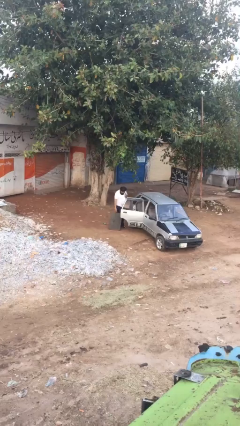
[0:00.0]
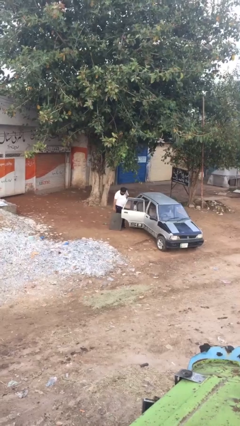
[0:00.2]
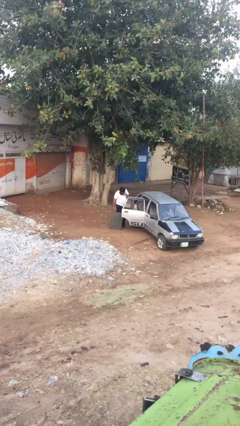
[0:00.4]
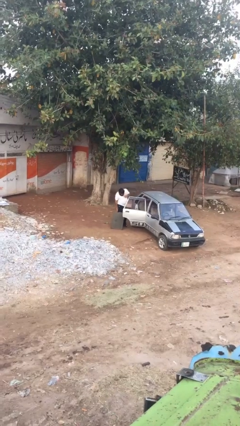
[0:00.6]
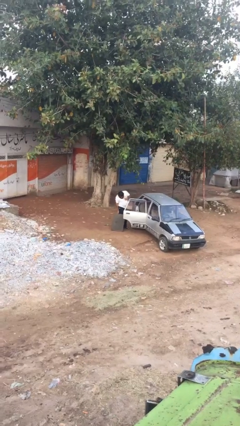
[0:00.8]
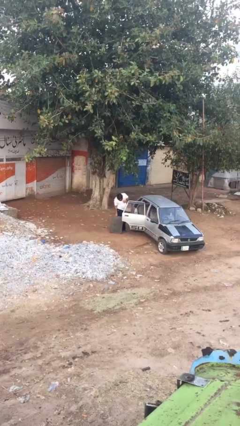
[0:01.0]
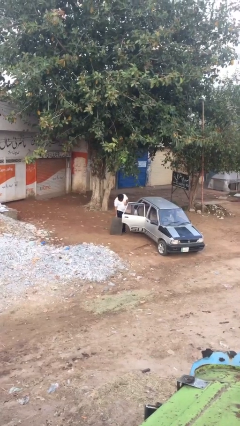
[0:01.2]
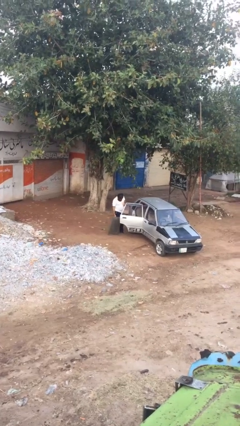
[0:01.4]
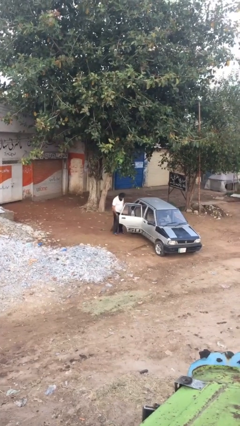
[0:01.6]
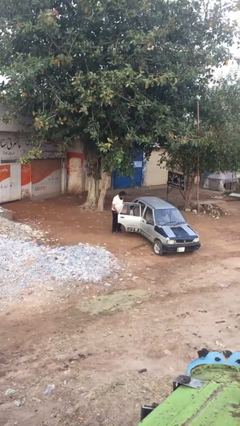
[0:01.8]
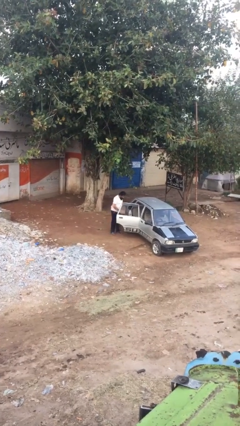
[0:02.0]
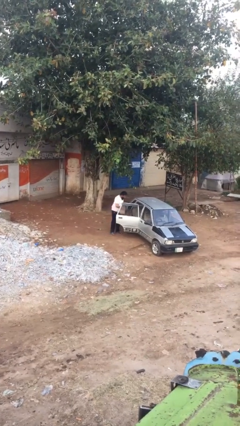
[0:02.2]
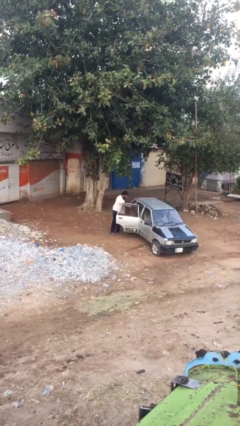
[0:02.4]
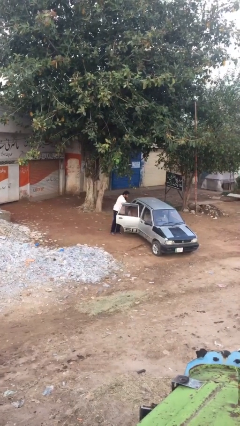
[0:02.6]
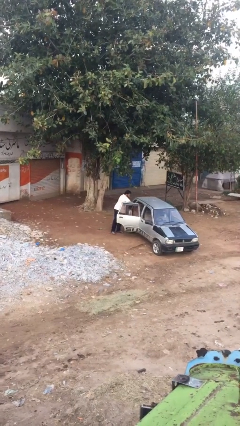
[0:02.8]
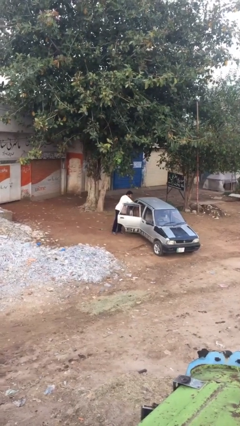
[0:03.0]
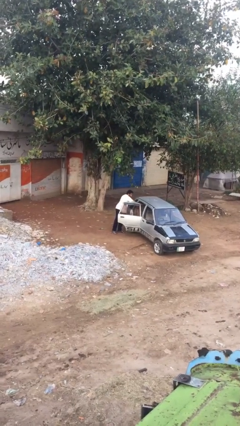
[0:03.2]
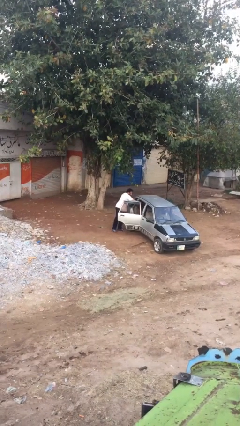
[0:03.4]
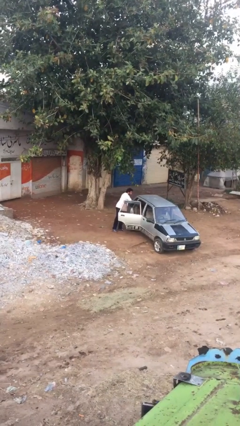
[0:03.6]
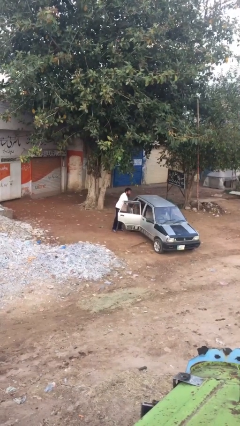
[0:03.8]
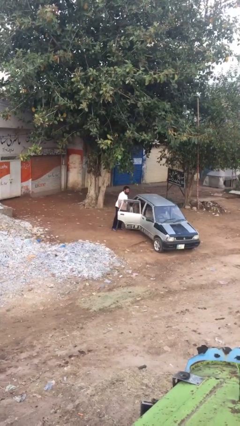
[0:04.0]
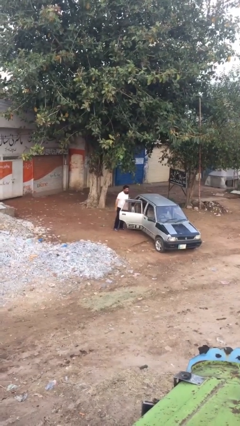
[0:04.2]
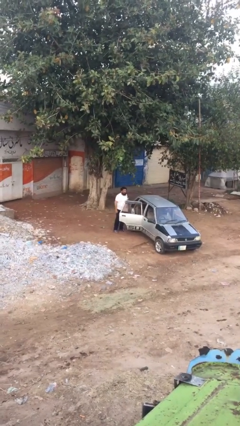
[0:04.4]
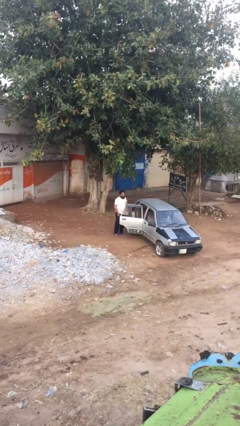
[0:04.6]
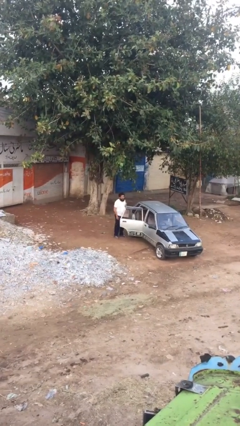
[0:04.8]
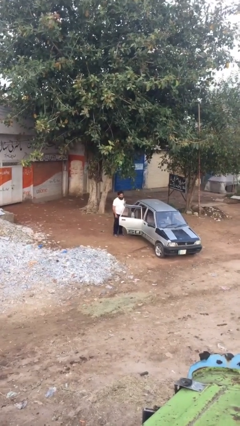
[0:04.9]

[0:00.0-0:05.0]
person loads car

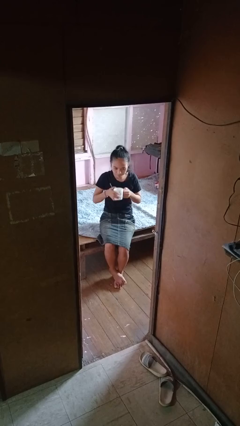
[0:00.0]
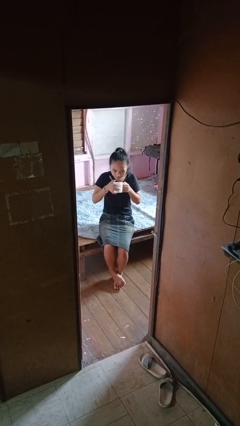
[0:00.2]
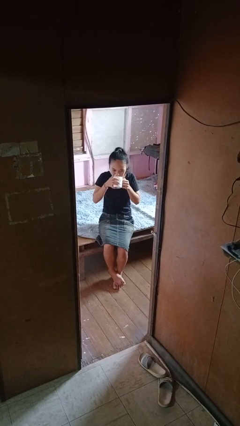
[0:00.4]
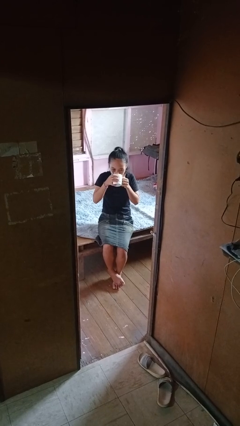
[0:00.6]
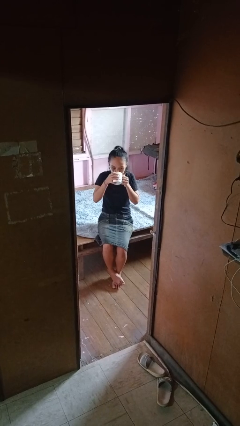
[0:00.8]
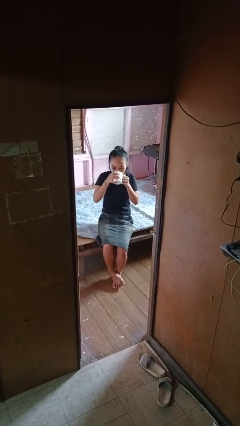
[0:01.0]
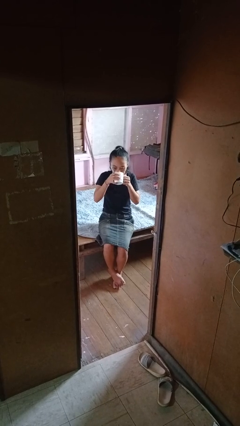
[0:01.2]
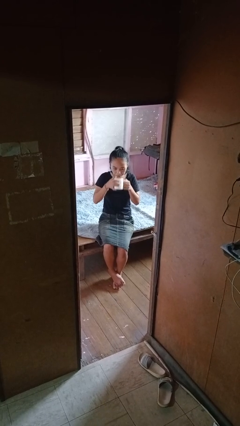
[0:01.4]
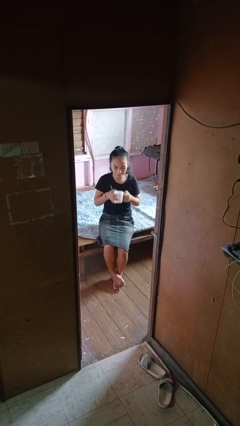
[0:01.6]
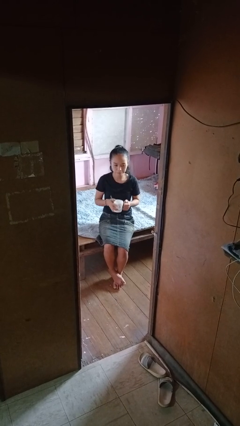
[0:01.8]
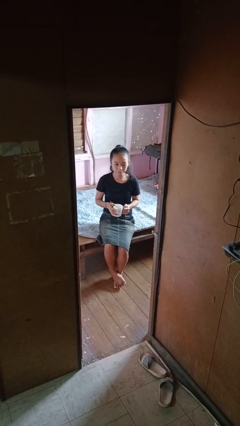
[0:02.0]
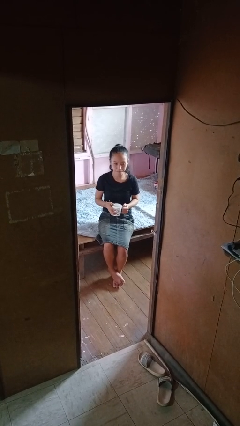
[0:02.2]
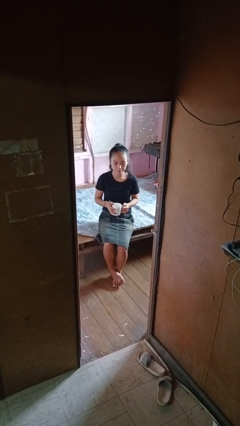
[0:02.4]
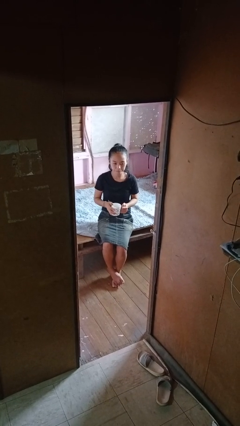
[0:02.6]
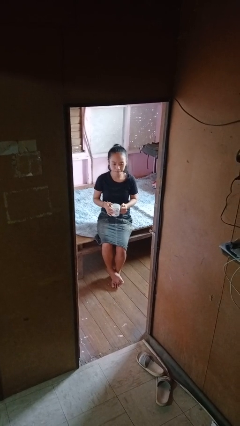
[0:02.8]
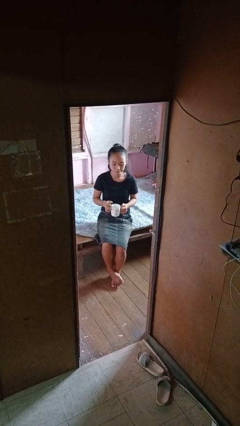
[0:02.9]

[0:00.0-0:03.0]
person drinks from mug

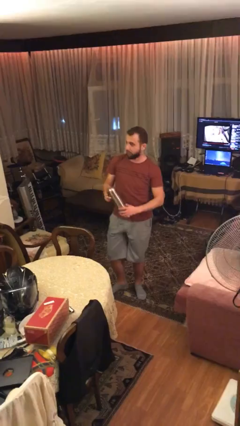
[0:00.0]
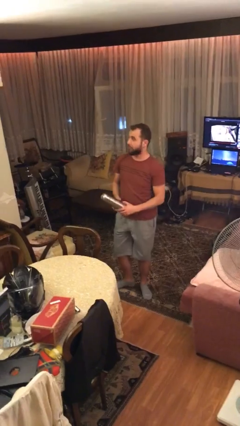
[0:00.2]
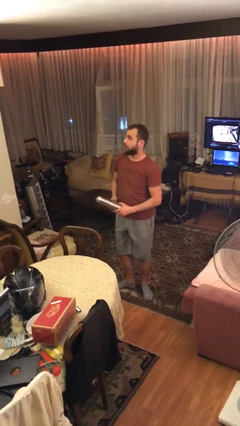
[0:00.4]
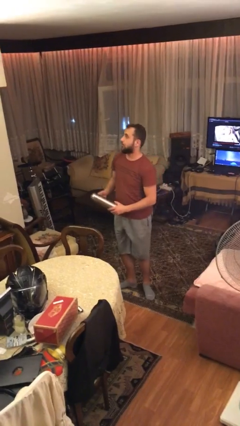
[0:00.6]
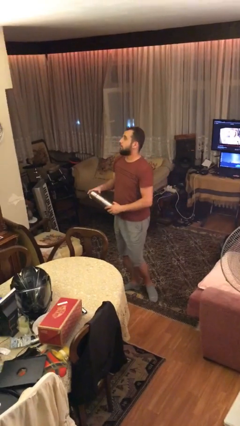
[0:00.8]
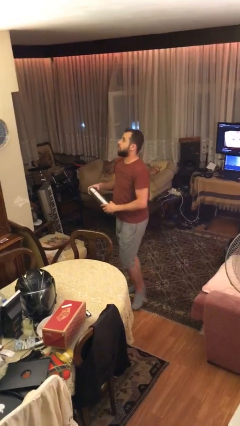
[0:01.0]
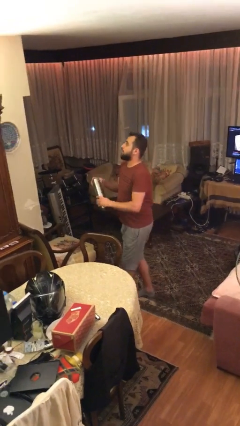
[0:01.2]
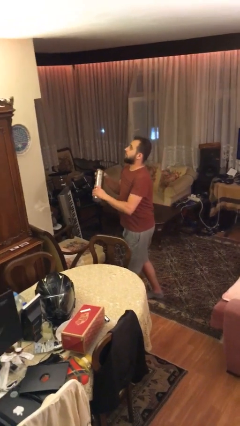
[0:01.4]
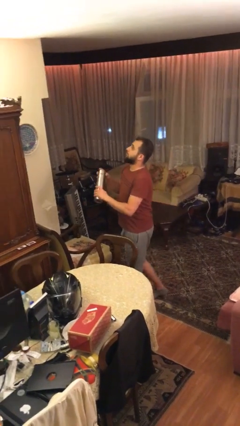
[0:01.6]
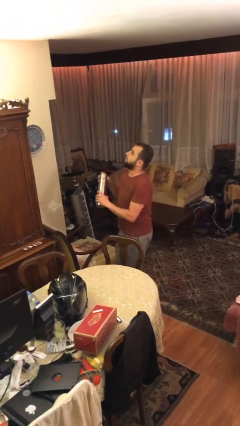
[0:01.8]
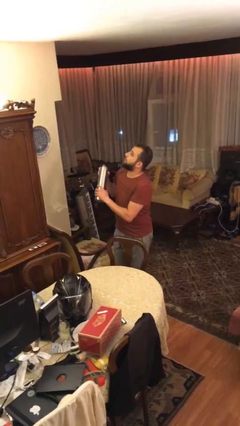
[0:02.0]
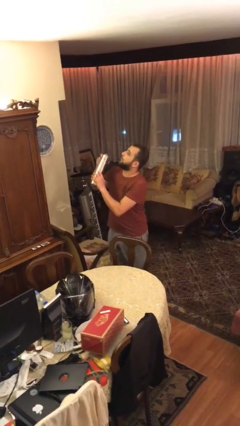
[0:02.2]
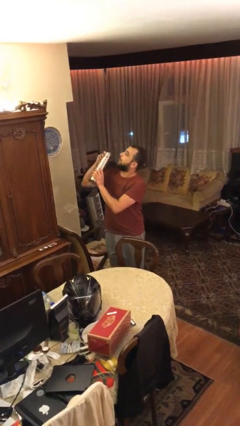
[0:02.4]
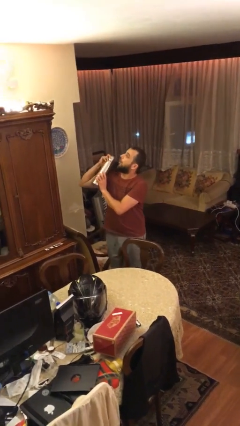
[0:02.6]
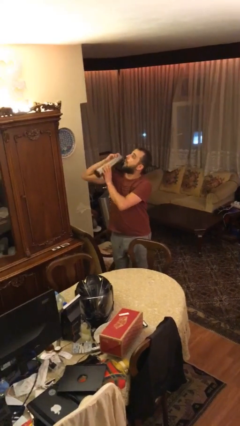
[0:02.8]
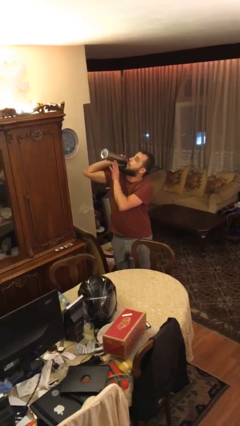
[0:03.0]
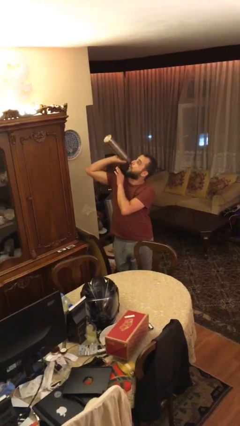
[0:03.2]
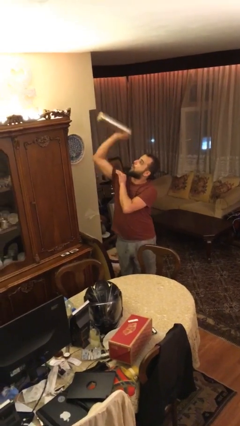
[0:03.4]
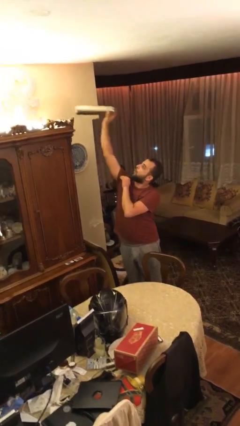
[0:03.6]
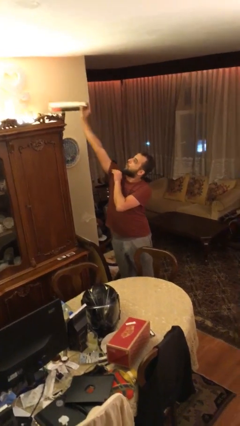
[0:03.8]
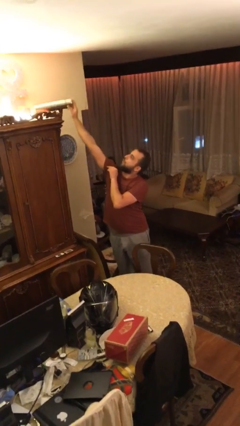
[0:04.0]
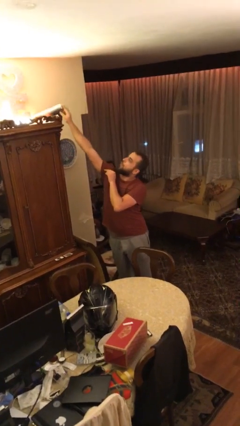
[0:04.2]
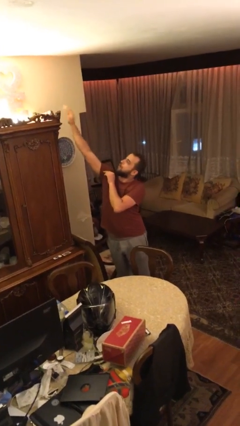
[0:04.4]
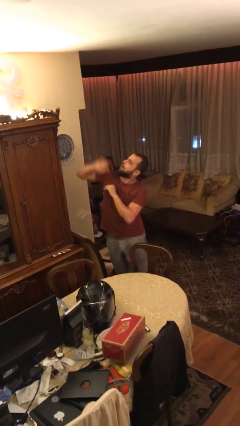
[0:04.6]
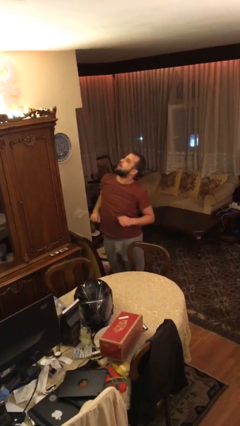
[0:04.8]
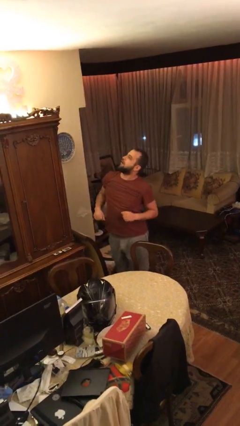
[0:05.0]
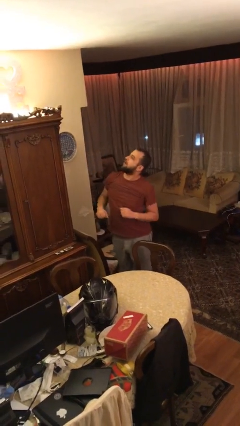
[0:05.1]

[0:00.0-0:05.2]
person puts down object on shelf

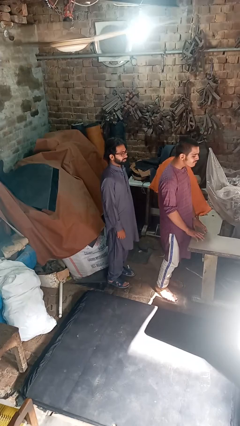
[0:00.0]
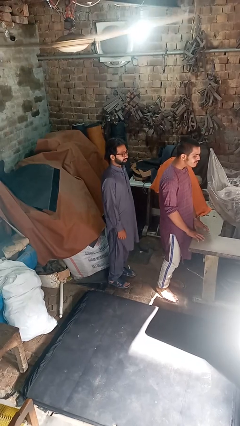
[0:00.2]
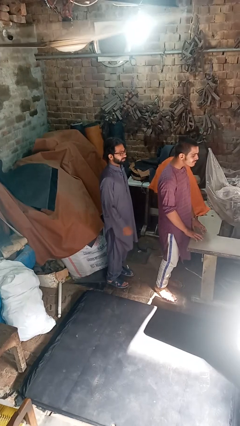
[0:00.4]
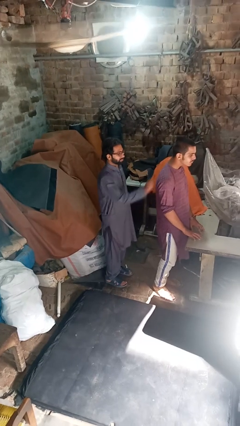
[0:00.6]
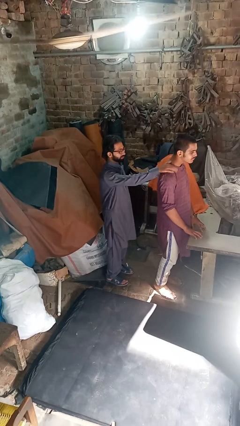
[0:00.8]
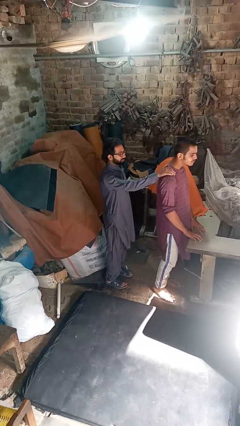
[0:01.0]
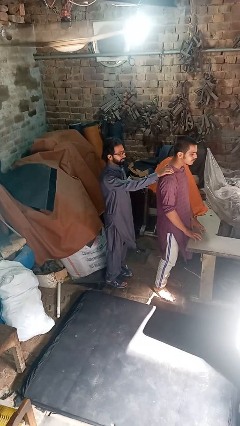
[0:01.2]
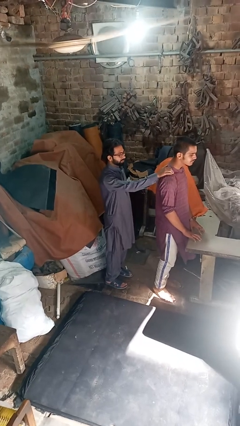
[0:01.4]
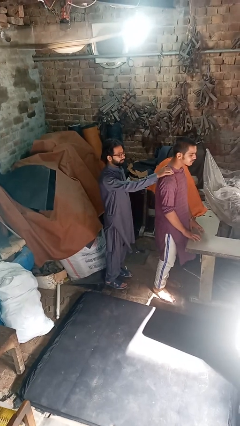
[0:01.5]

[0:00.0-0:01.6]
person grabs person by shoulder

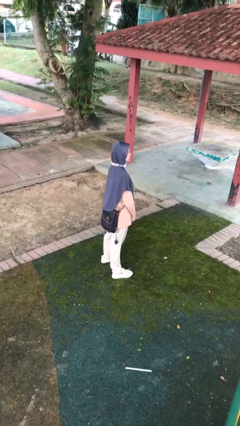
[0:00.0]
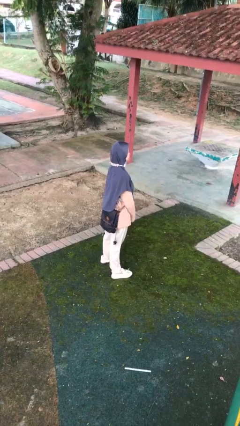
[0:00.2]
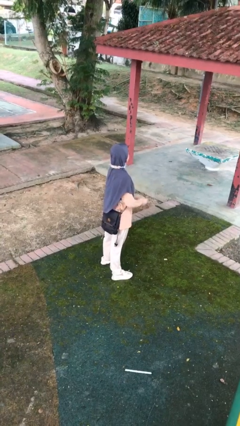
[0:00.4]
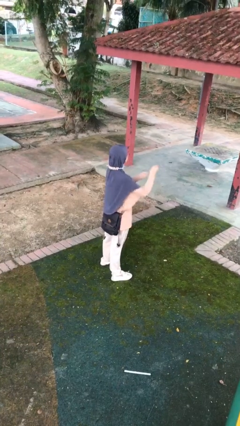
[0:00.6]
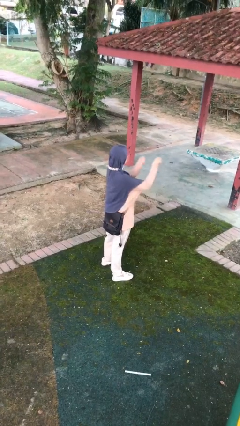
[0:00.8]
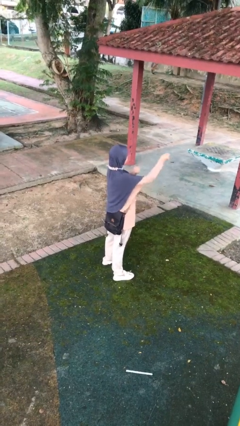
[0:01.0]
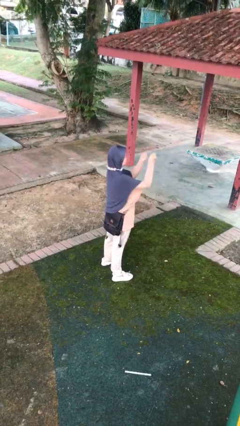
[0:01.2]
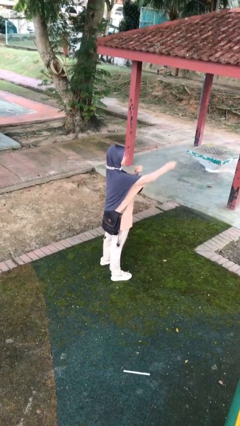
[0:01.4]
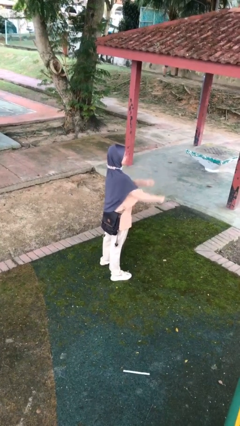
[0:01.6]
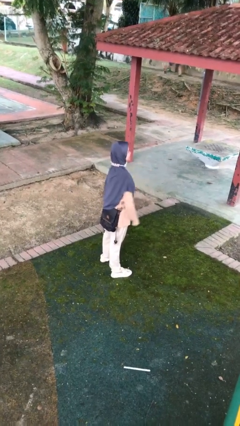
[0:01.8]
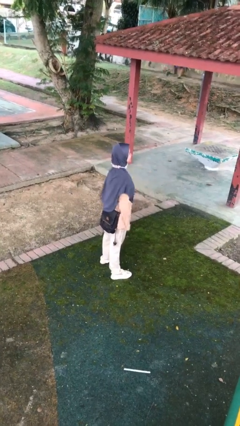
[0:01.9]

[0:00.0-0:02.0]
person punches

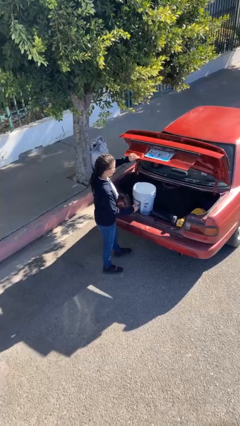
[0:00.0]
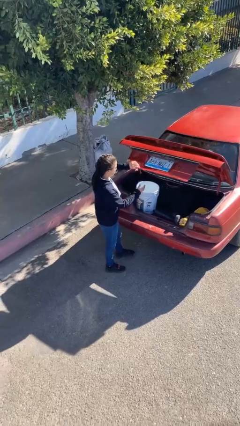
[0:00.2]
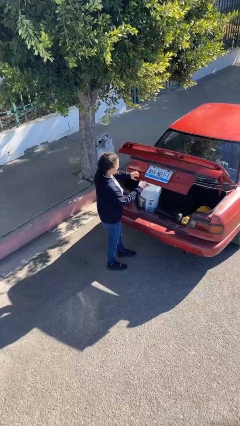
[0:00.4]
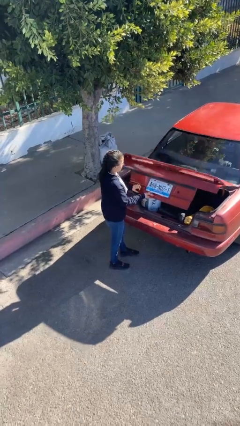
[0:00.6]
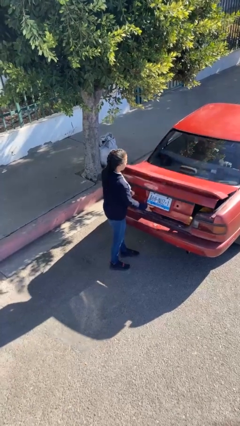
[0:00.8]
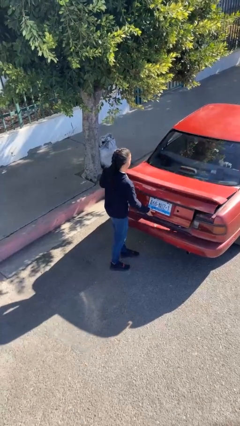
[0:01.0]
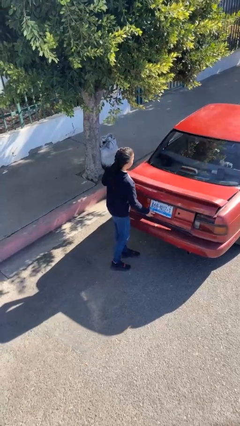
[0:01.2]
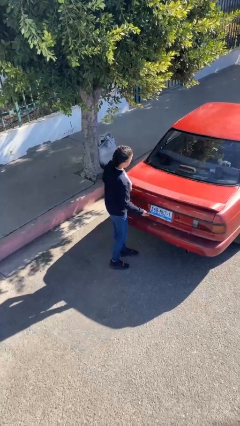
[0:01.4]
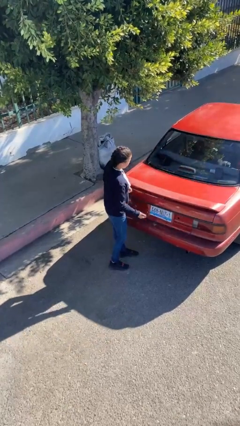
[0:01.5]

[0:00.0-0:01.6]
person closes car trunk
